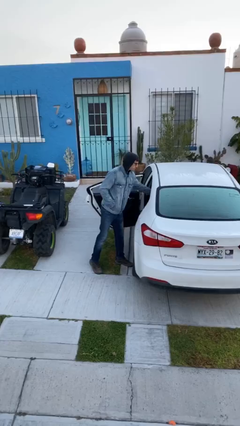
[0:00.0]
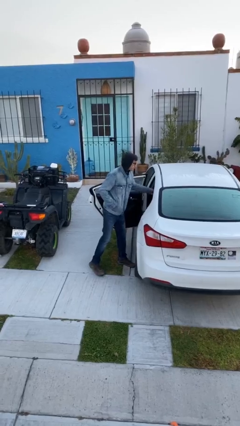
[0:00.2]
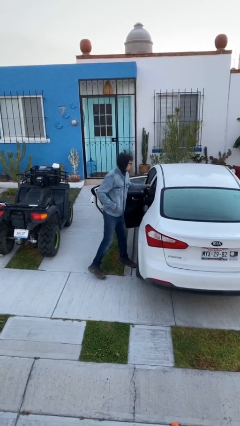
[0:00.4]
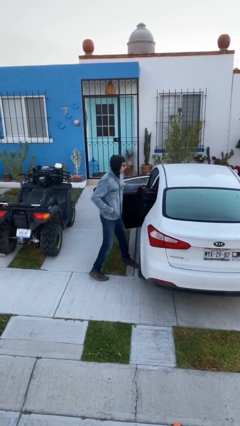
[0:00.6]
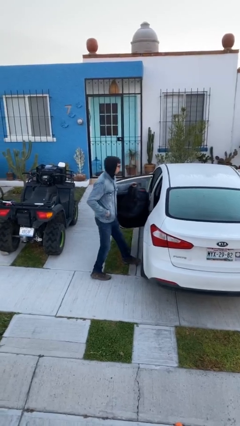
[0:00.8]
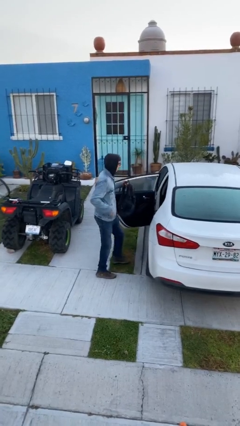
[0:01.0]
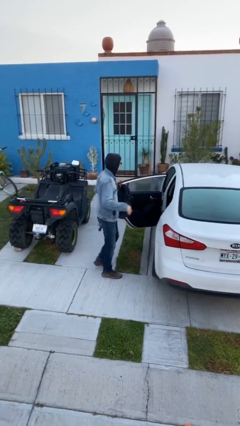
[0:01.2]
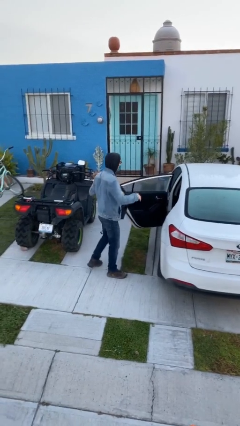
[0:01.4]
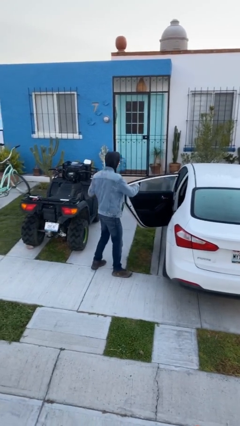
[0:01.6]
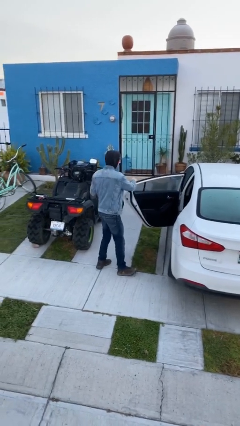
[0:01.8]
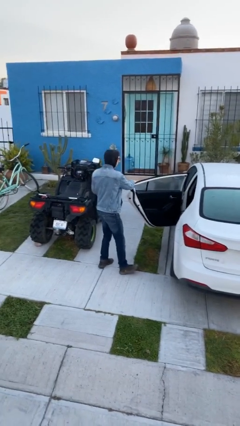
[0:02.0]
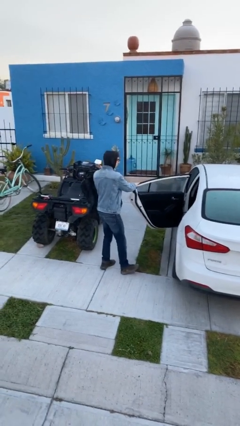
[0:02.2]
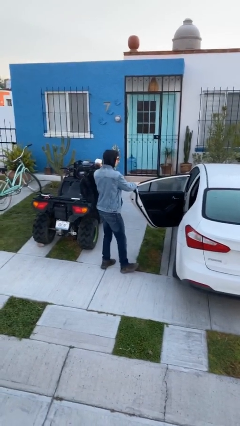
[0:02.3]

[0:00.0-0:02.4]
person unloads car

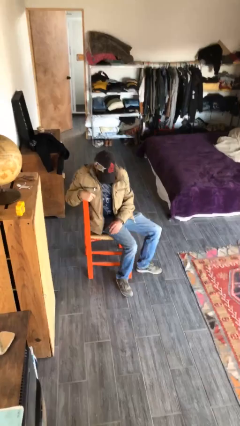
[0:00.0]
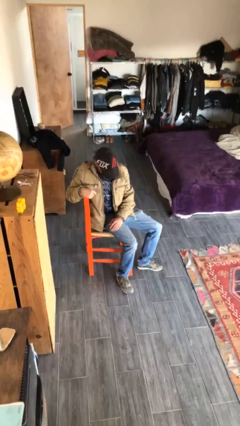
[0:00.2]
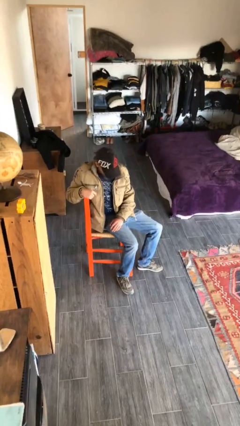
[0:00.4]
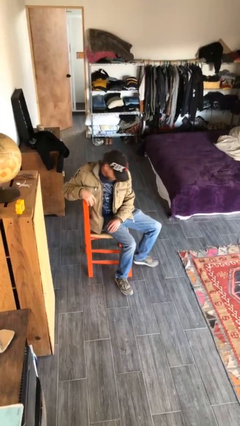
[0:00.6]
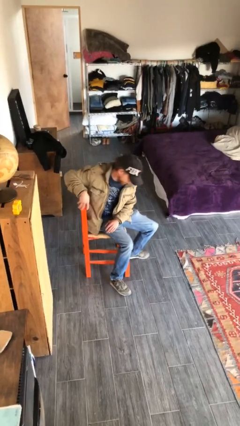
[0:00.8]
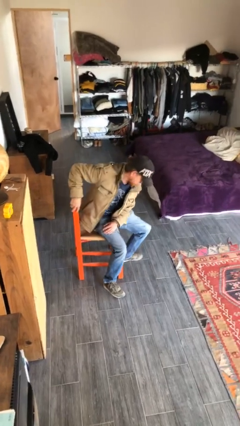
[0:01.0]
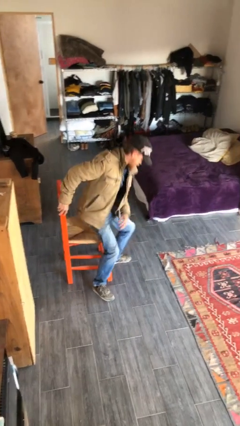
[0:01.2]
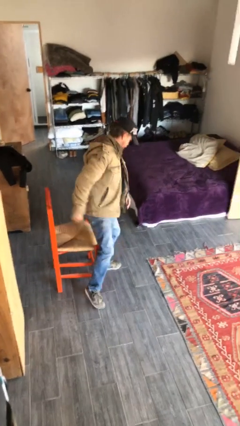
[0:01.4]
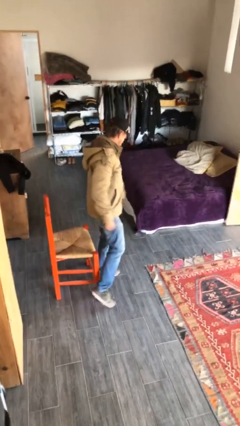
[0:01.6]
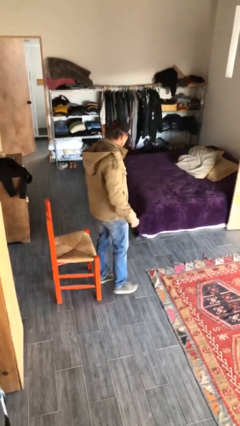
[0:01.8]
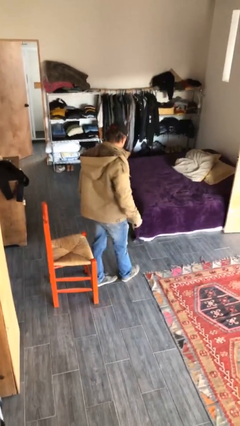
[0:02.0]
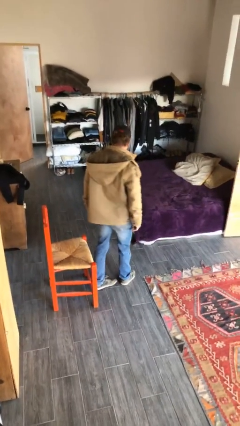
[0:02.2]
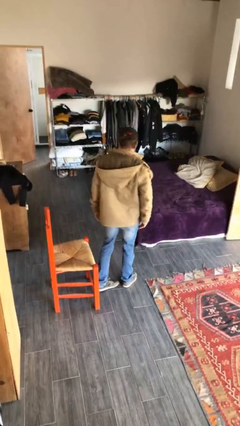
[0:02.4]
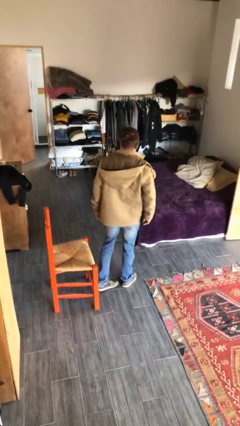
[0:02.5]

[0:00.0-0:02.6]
person stands up

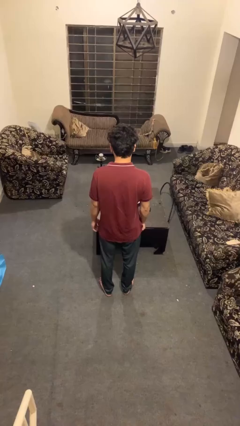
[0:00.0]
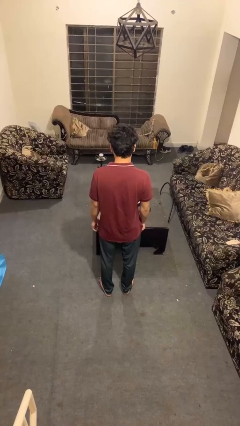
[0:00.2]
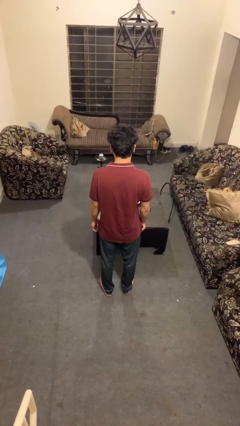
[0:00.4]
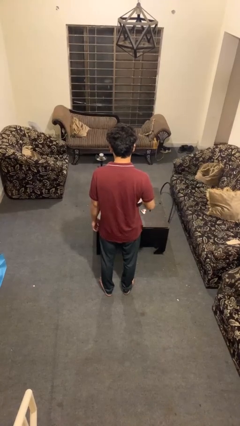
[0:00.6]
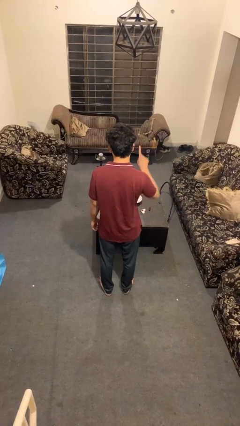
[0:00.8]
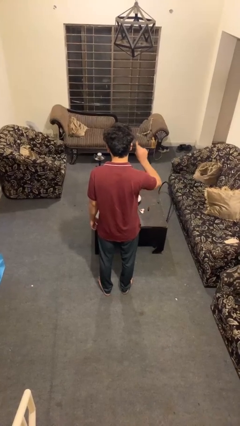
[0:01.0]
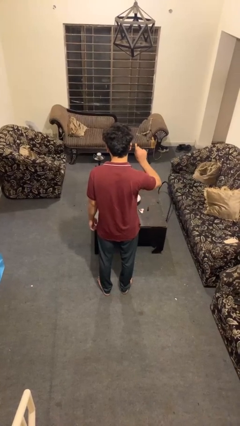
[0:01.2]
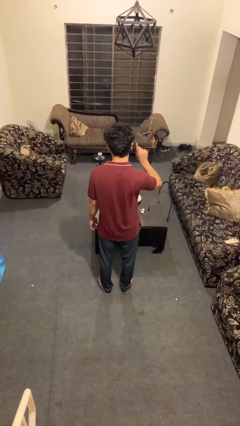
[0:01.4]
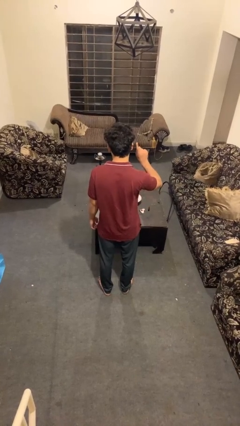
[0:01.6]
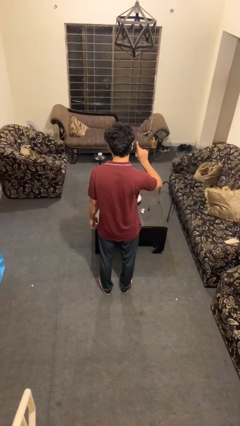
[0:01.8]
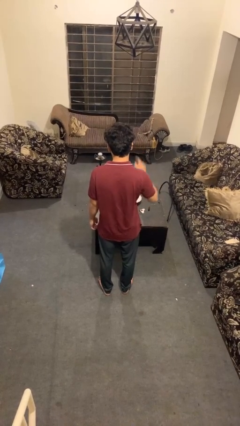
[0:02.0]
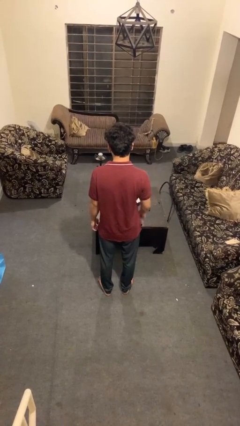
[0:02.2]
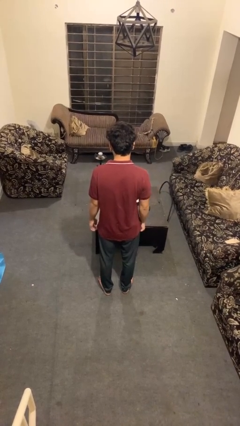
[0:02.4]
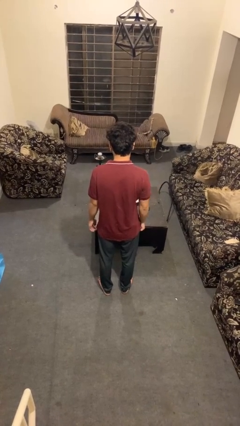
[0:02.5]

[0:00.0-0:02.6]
person gestures number one

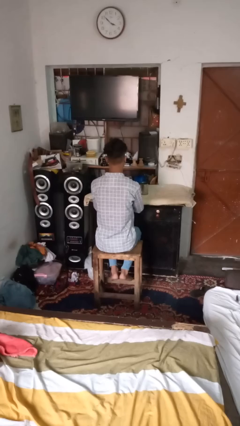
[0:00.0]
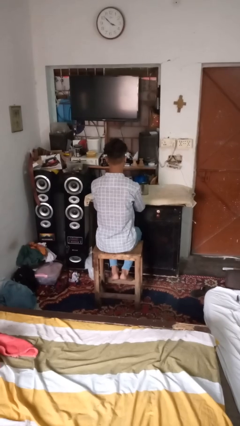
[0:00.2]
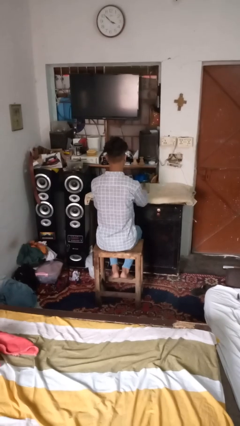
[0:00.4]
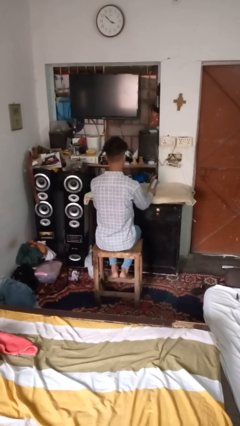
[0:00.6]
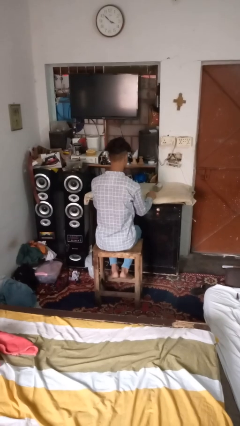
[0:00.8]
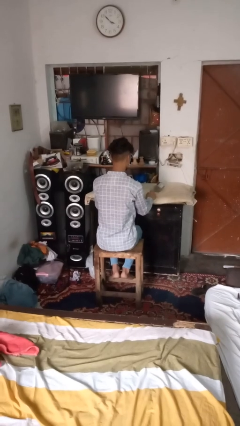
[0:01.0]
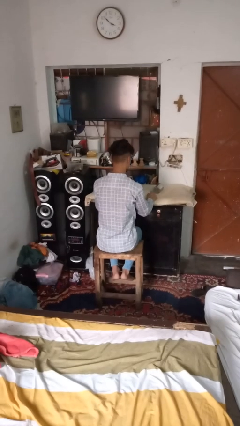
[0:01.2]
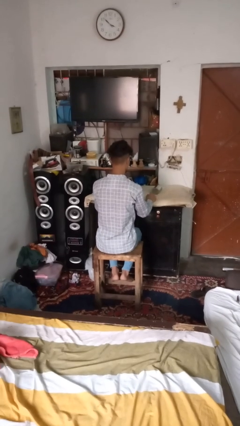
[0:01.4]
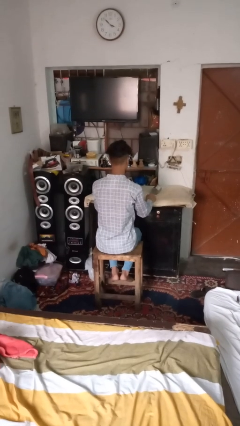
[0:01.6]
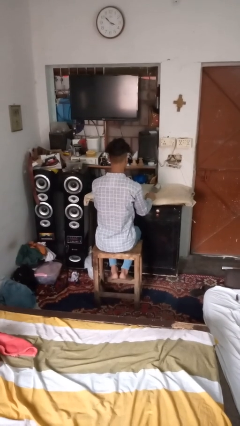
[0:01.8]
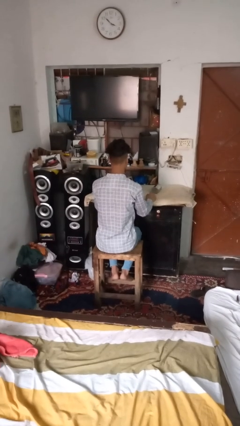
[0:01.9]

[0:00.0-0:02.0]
person knocks over glass

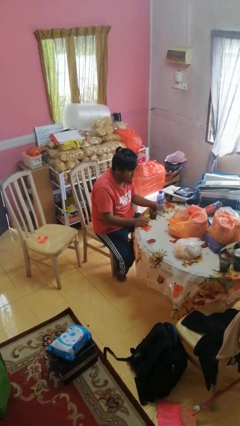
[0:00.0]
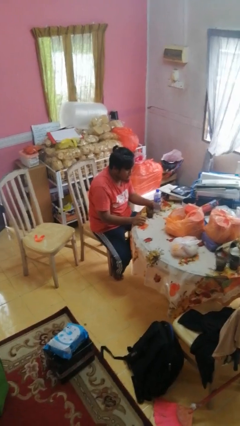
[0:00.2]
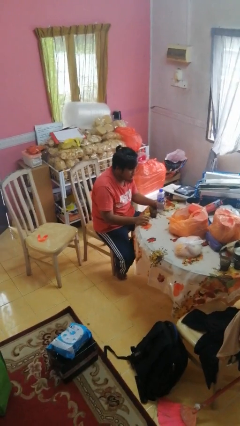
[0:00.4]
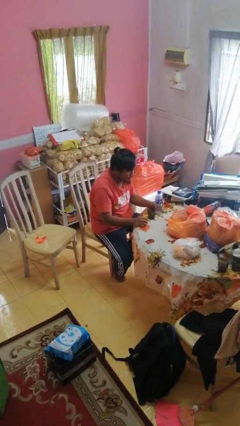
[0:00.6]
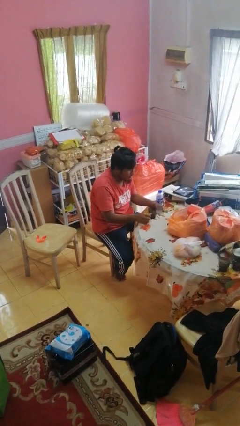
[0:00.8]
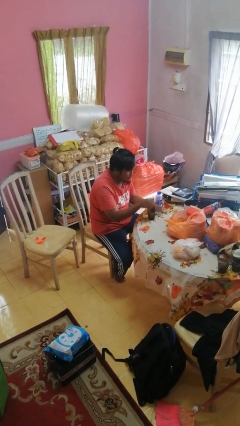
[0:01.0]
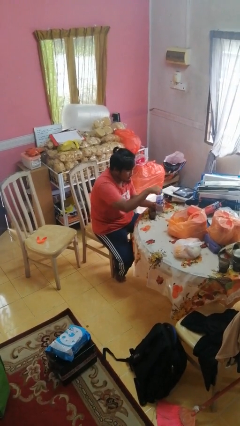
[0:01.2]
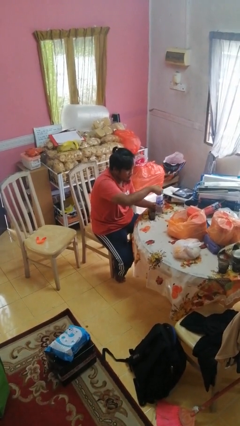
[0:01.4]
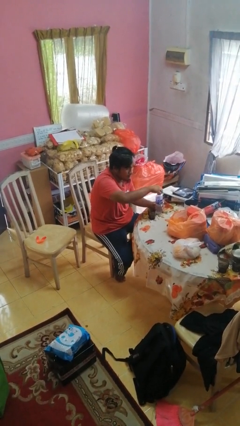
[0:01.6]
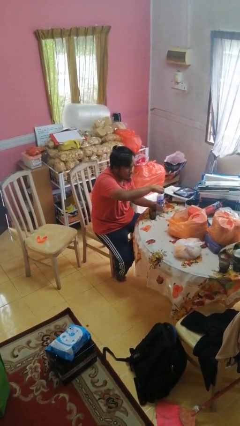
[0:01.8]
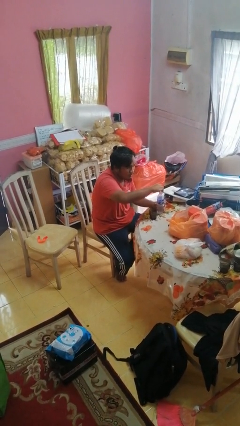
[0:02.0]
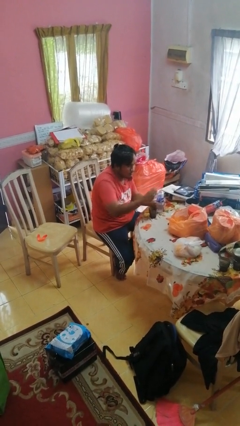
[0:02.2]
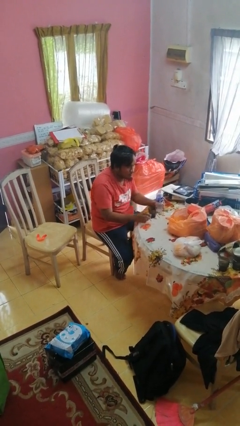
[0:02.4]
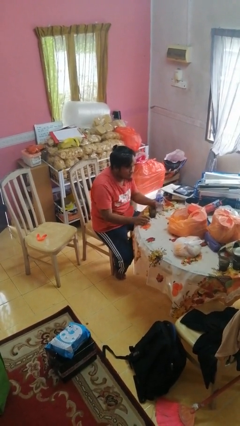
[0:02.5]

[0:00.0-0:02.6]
person unscrews lid from bottle

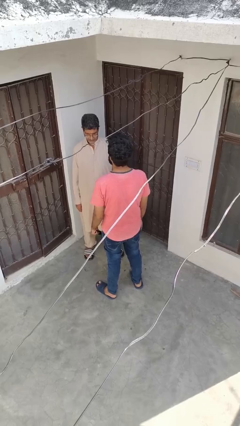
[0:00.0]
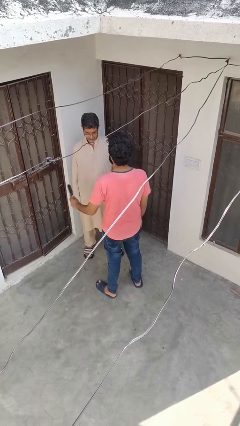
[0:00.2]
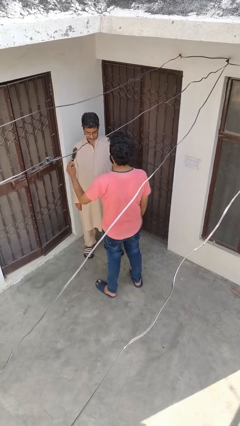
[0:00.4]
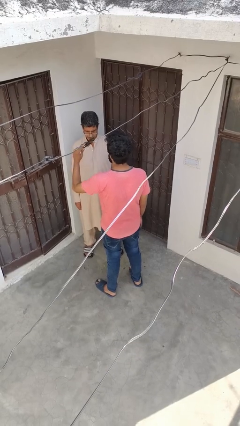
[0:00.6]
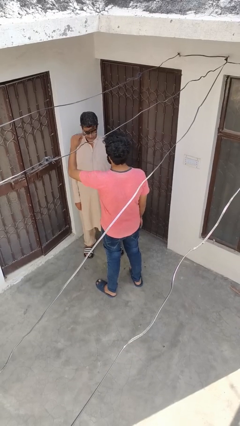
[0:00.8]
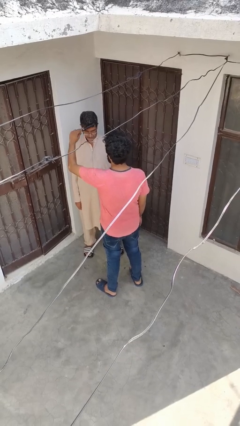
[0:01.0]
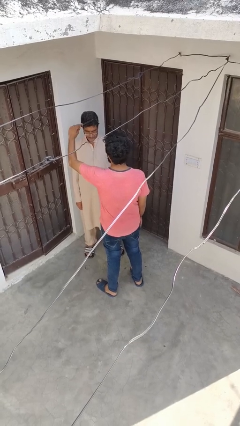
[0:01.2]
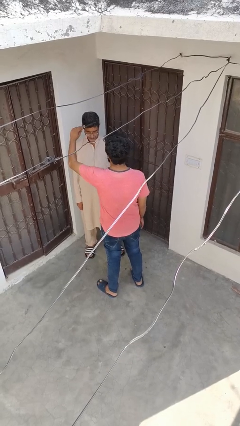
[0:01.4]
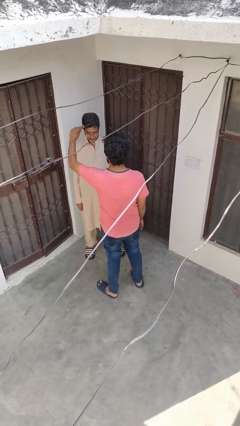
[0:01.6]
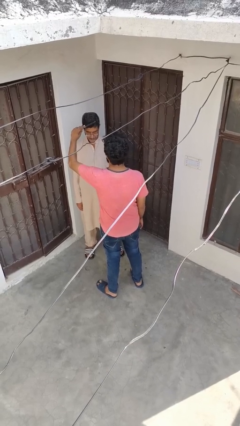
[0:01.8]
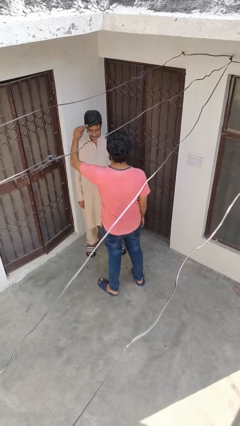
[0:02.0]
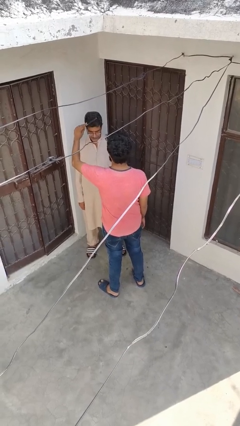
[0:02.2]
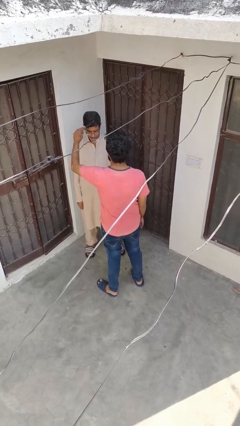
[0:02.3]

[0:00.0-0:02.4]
person brushes hair of person

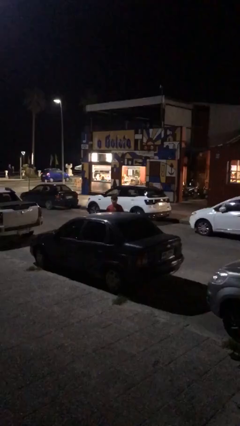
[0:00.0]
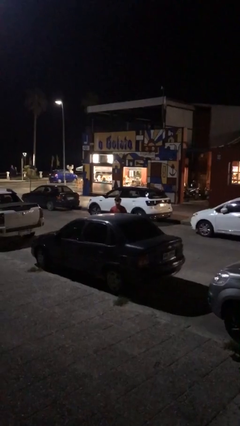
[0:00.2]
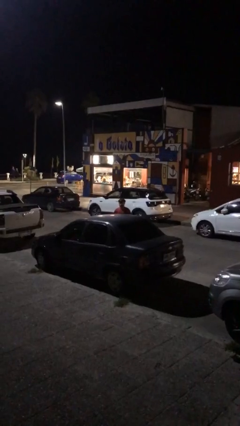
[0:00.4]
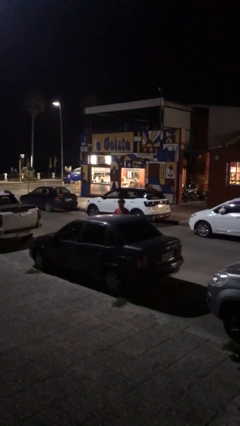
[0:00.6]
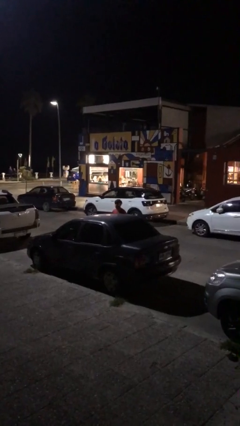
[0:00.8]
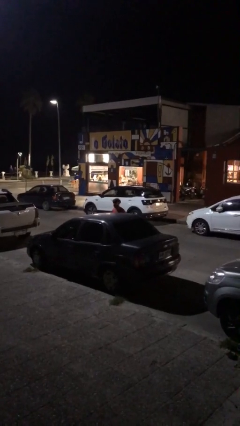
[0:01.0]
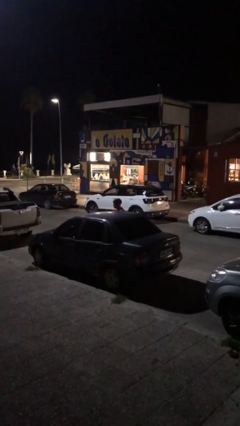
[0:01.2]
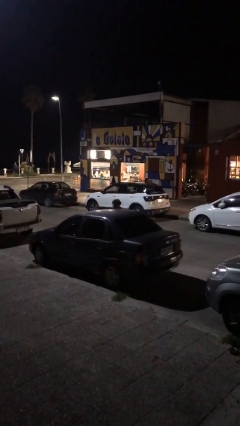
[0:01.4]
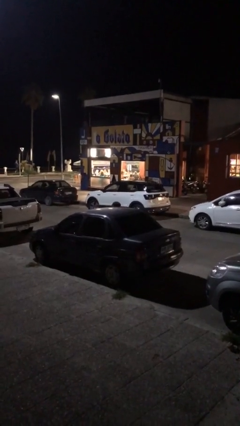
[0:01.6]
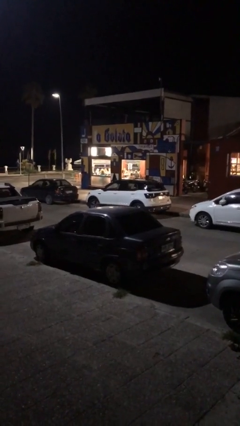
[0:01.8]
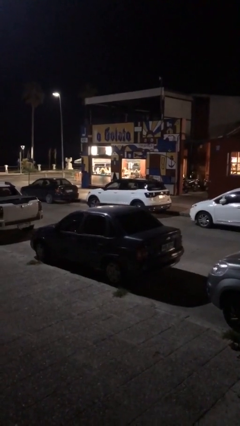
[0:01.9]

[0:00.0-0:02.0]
person enters car
